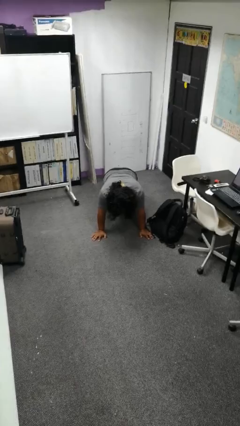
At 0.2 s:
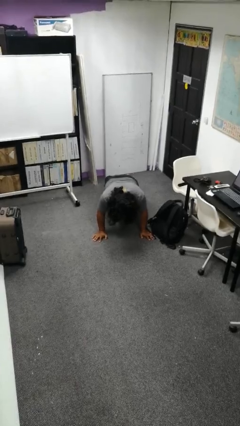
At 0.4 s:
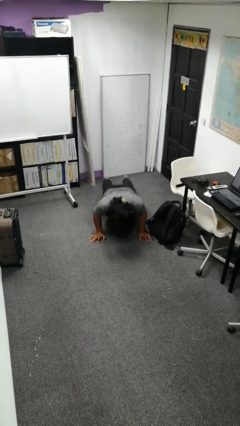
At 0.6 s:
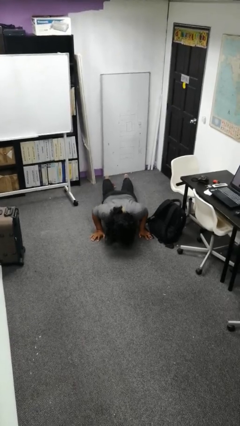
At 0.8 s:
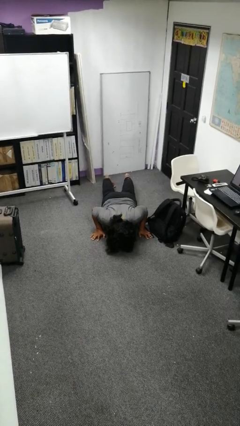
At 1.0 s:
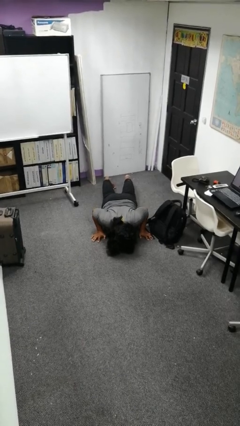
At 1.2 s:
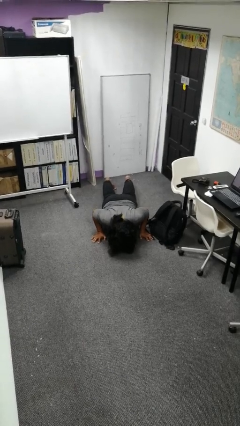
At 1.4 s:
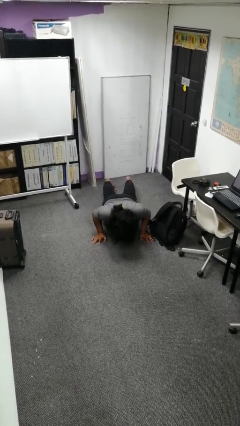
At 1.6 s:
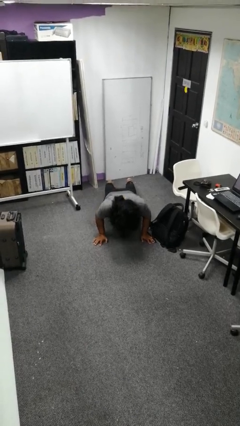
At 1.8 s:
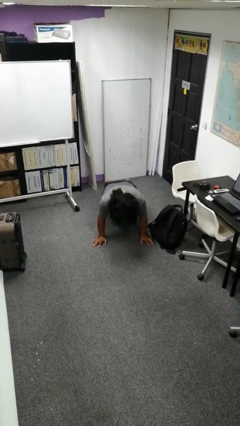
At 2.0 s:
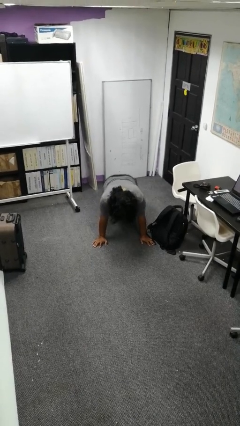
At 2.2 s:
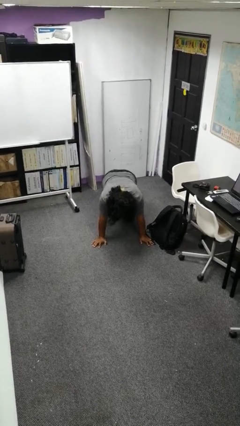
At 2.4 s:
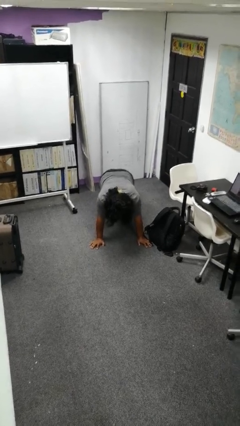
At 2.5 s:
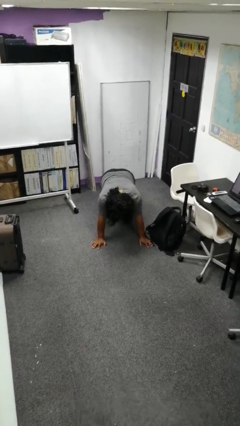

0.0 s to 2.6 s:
person exercises with pushup

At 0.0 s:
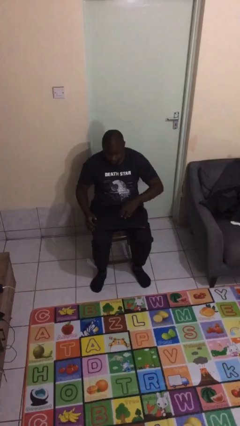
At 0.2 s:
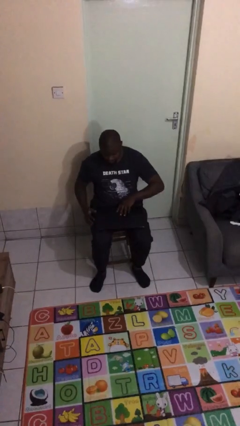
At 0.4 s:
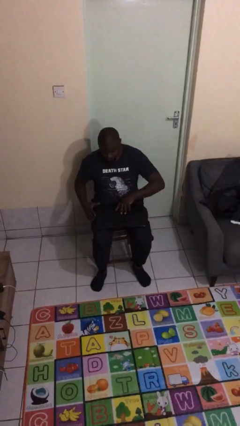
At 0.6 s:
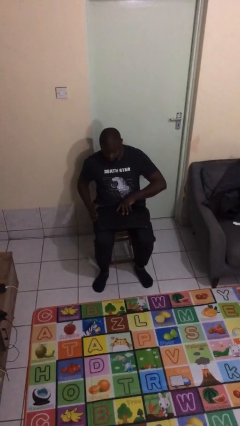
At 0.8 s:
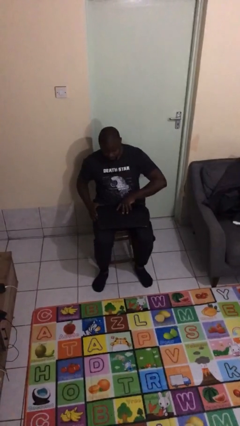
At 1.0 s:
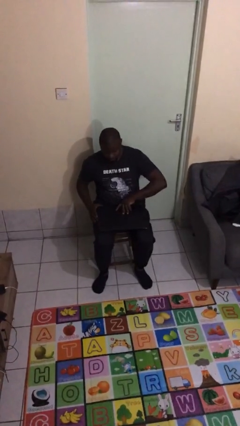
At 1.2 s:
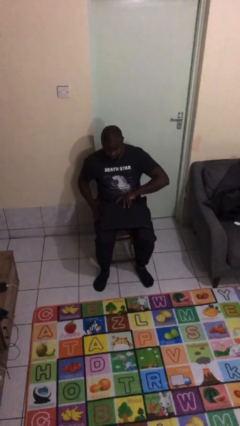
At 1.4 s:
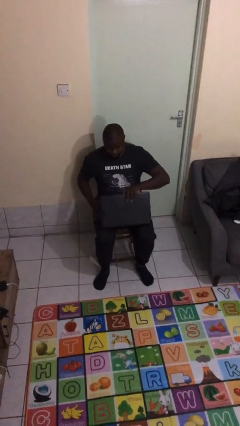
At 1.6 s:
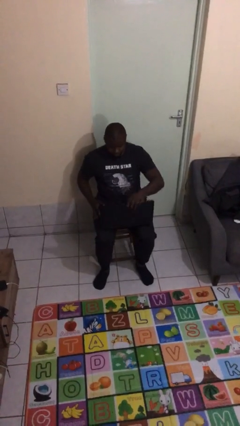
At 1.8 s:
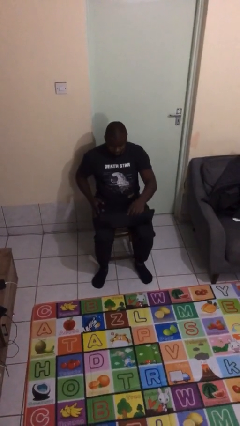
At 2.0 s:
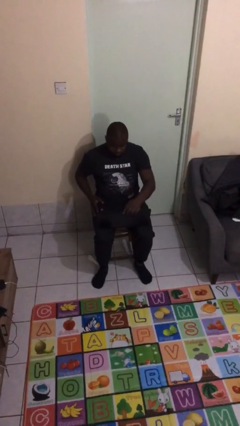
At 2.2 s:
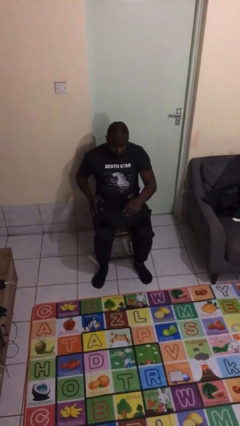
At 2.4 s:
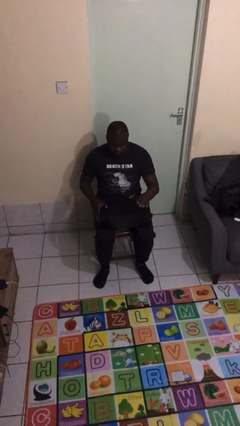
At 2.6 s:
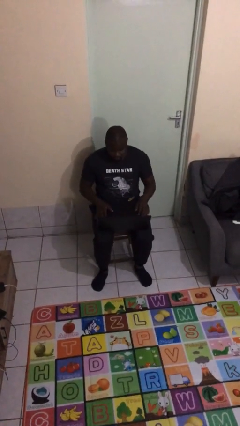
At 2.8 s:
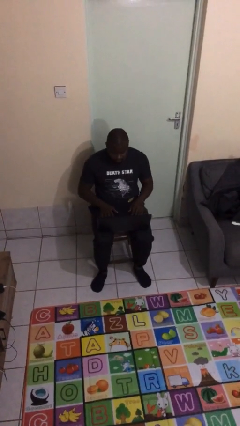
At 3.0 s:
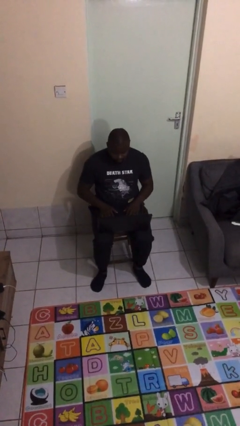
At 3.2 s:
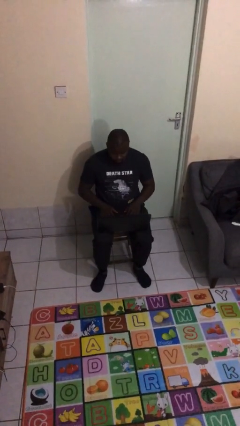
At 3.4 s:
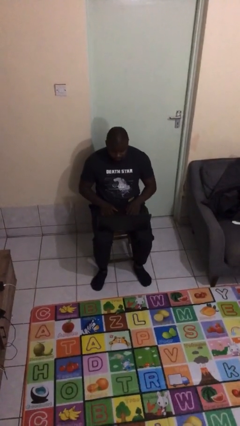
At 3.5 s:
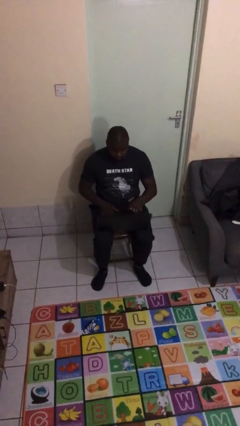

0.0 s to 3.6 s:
person opens laptop

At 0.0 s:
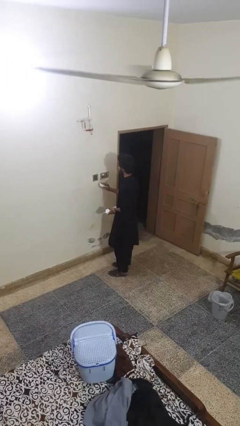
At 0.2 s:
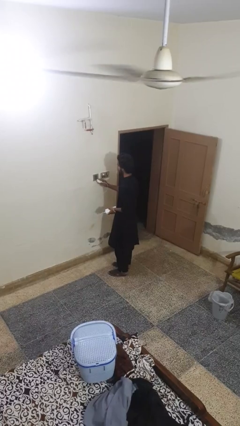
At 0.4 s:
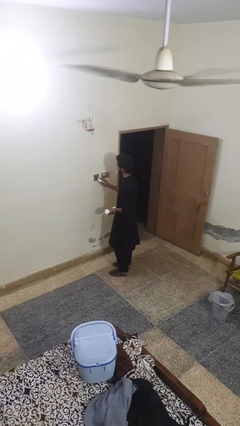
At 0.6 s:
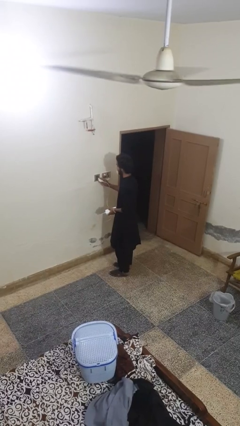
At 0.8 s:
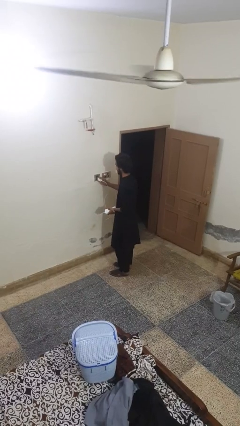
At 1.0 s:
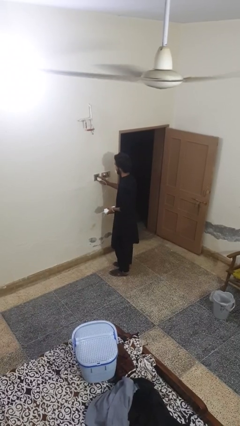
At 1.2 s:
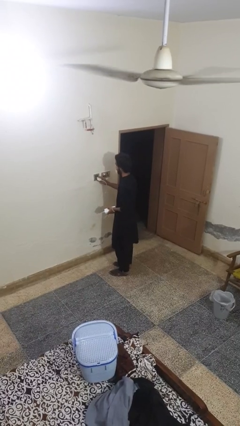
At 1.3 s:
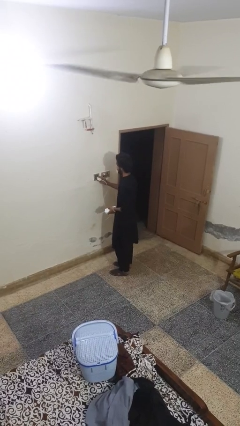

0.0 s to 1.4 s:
person plugs into electrical socket

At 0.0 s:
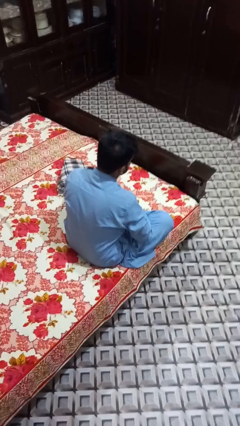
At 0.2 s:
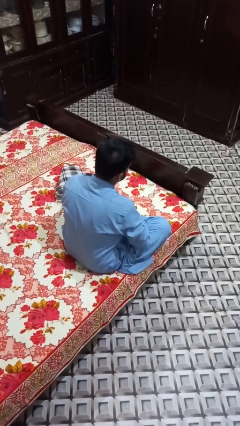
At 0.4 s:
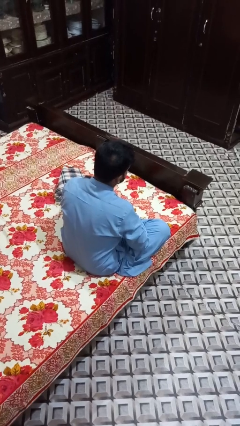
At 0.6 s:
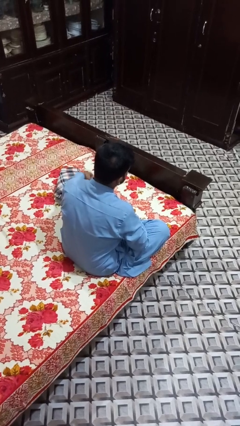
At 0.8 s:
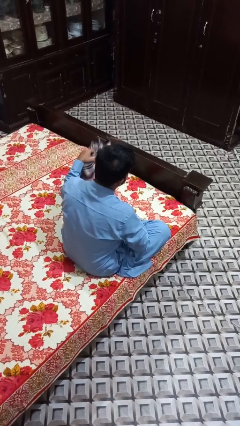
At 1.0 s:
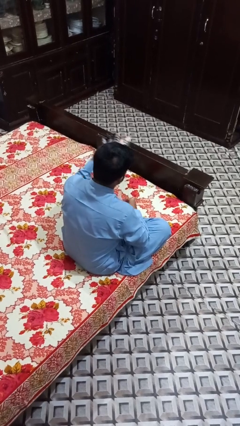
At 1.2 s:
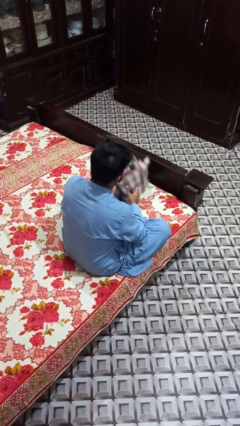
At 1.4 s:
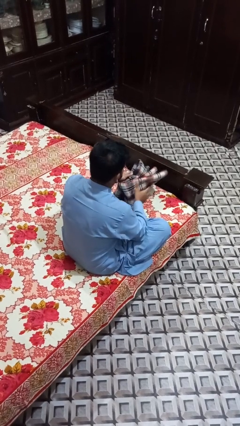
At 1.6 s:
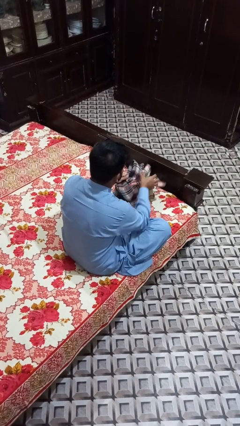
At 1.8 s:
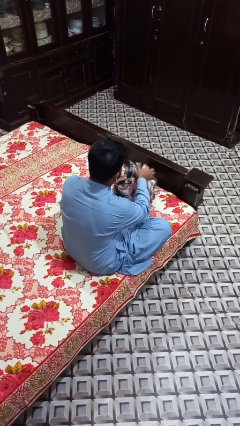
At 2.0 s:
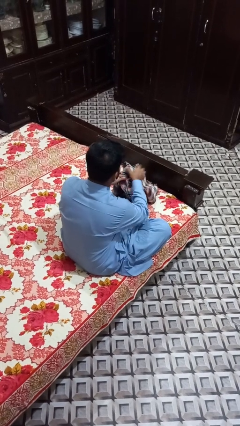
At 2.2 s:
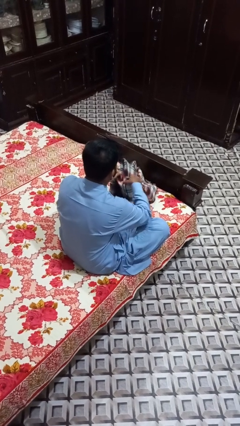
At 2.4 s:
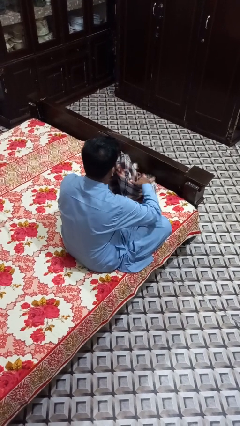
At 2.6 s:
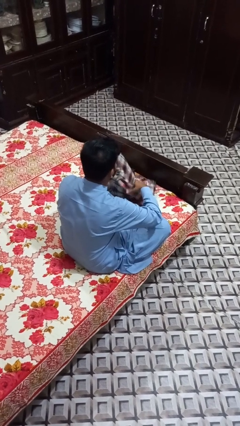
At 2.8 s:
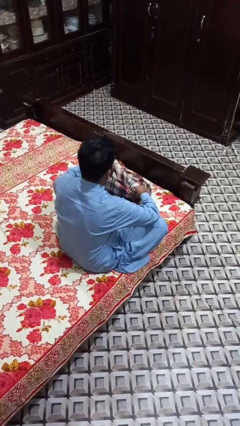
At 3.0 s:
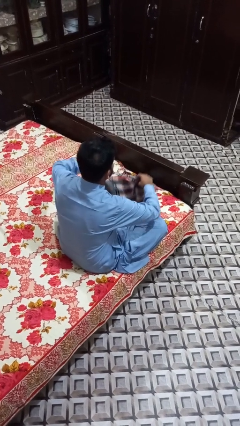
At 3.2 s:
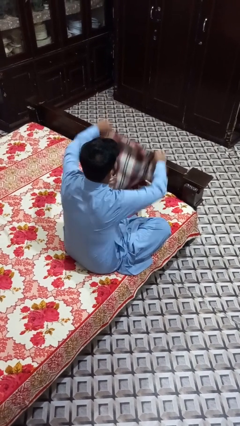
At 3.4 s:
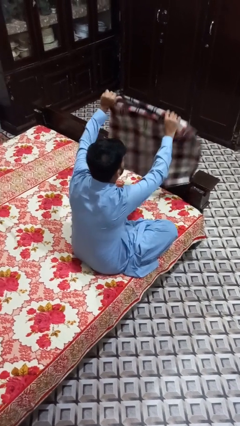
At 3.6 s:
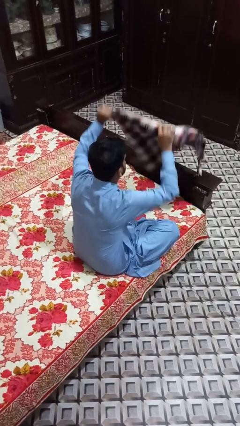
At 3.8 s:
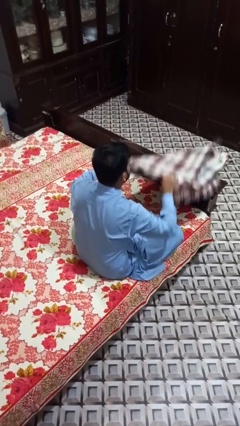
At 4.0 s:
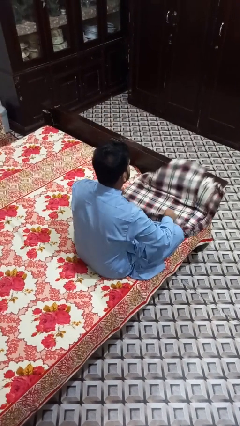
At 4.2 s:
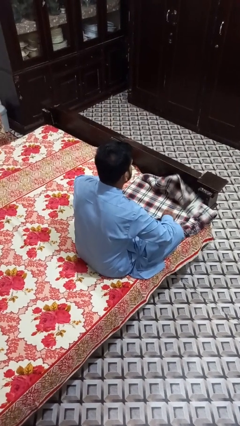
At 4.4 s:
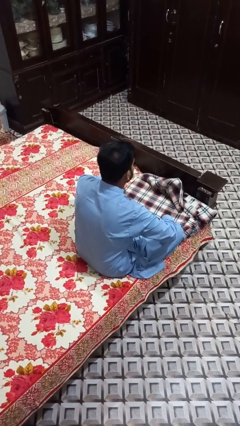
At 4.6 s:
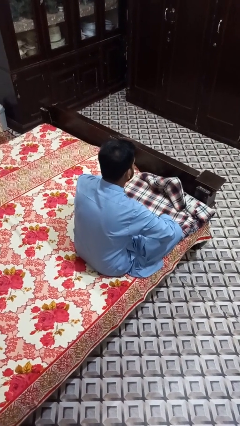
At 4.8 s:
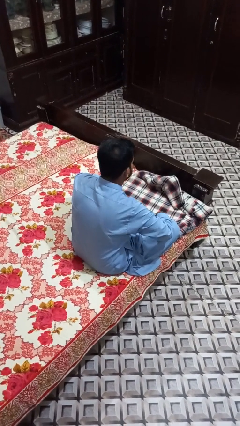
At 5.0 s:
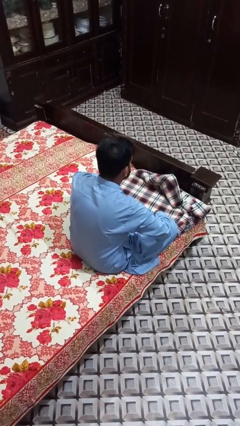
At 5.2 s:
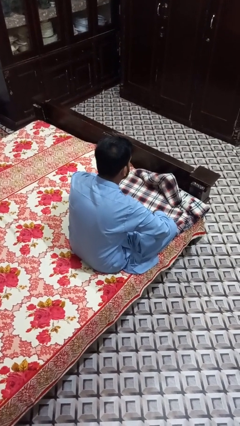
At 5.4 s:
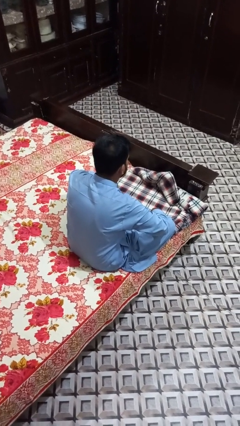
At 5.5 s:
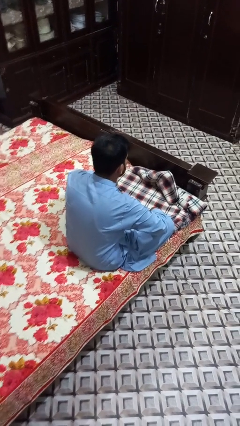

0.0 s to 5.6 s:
person unfolds blanket

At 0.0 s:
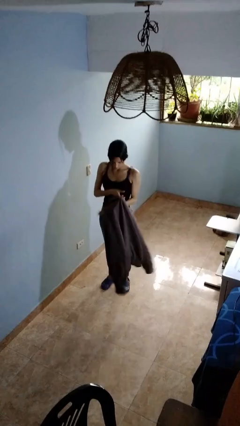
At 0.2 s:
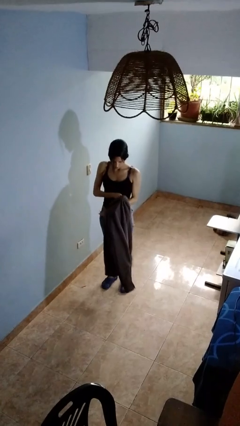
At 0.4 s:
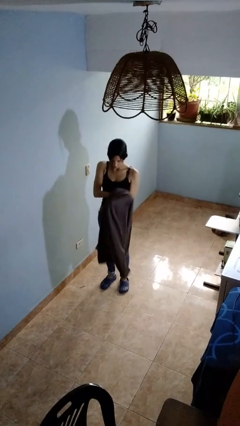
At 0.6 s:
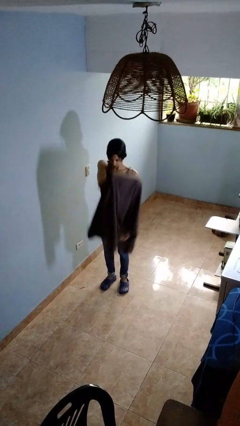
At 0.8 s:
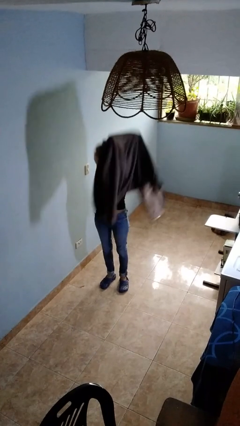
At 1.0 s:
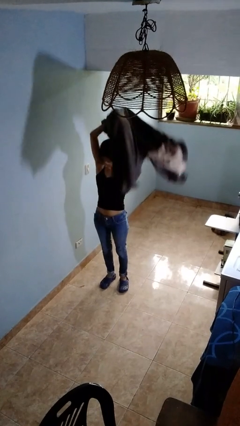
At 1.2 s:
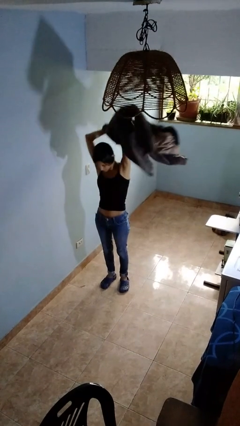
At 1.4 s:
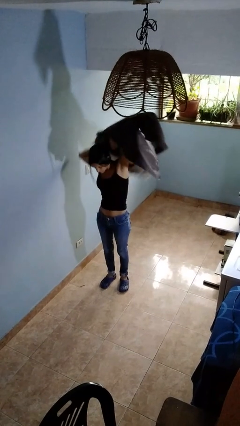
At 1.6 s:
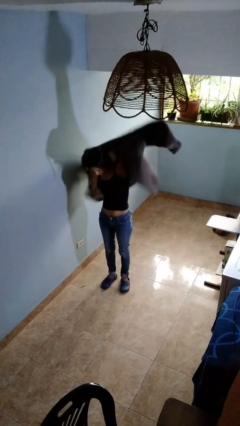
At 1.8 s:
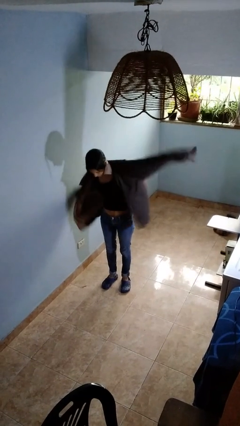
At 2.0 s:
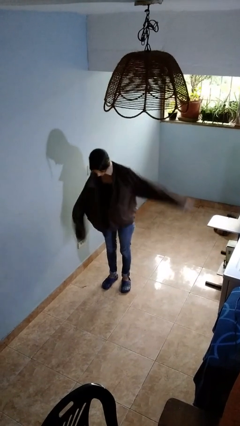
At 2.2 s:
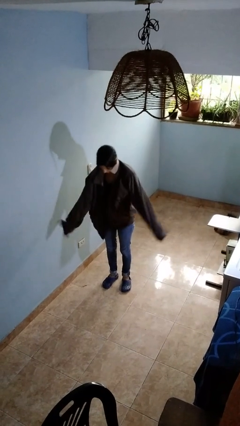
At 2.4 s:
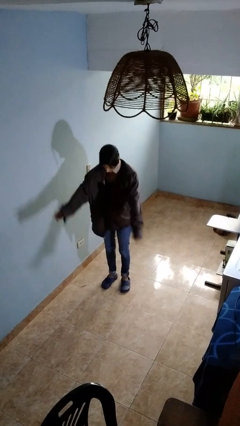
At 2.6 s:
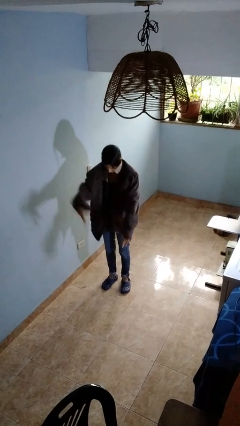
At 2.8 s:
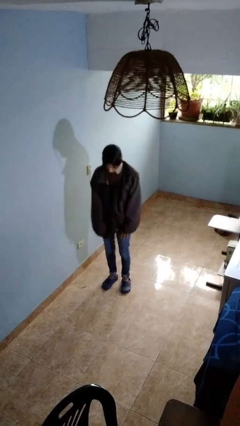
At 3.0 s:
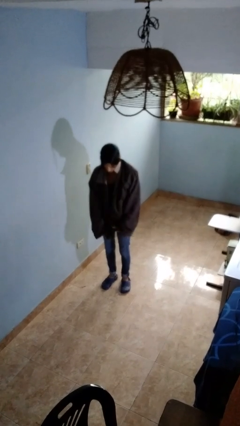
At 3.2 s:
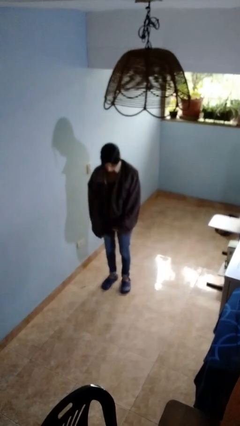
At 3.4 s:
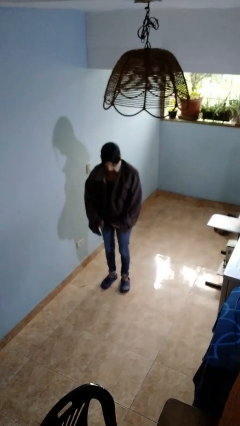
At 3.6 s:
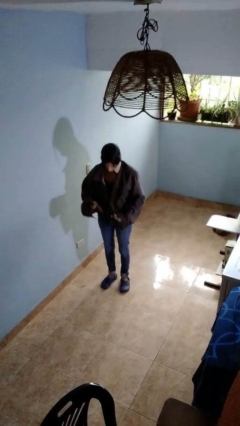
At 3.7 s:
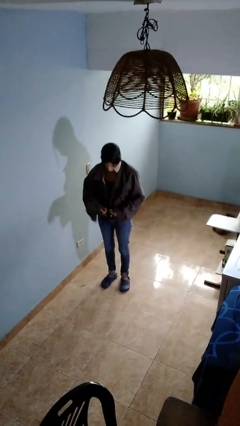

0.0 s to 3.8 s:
person puts on jacket
